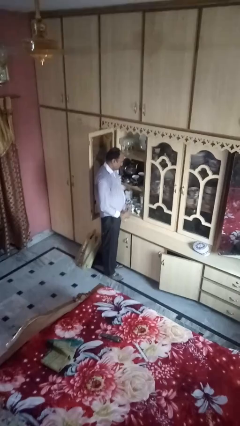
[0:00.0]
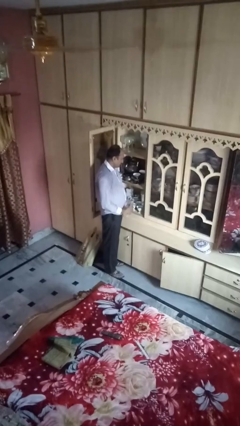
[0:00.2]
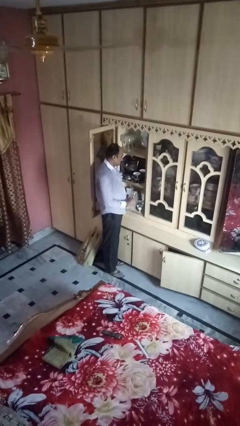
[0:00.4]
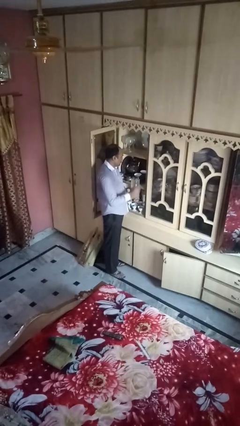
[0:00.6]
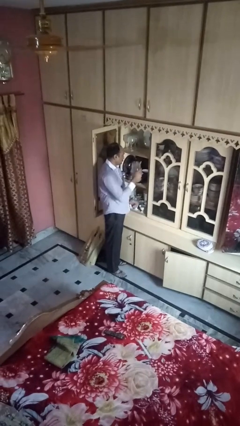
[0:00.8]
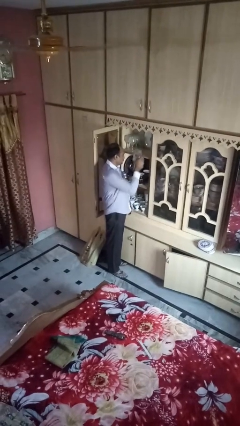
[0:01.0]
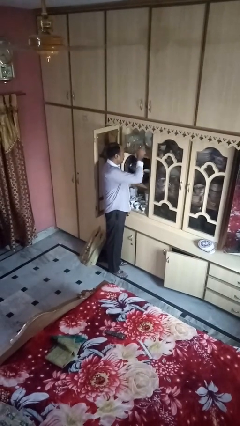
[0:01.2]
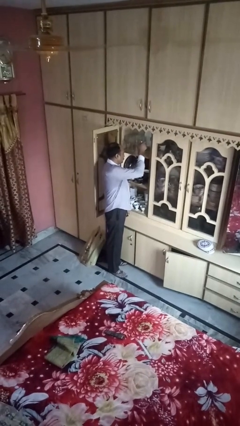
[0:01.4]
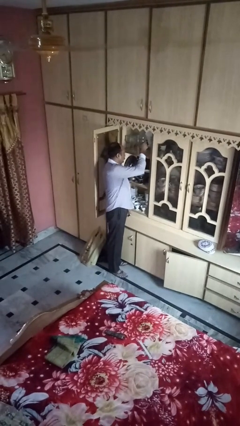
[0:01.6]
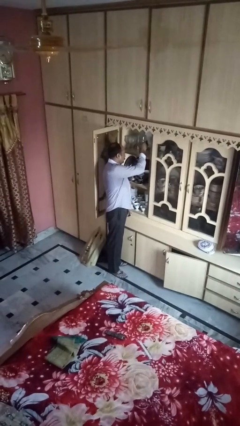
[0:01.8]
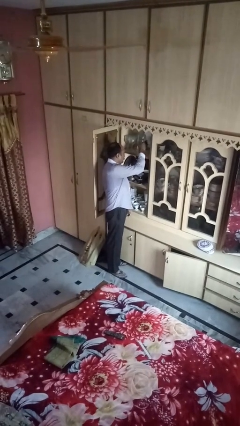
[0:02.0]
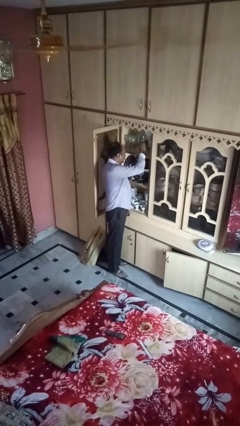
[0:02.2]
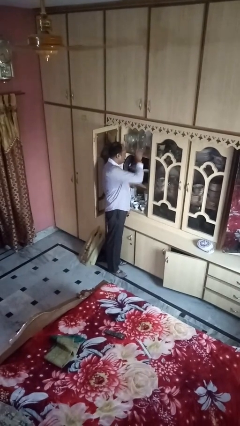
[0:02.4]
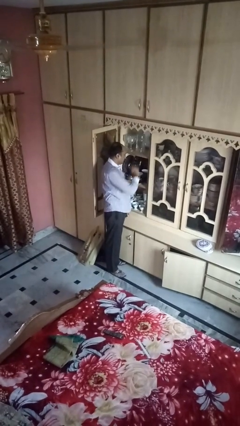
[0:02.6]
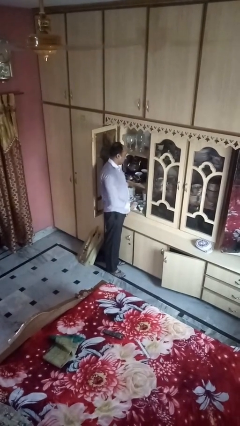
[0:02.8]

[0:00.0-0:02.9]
person puts down object into cabinet

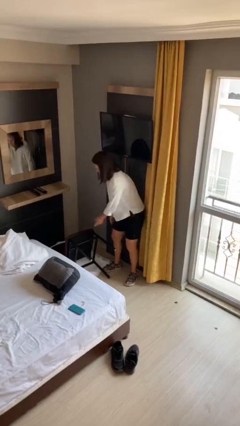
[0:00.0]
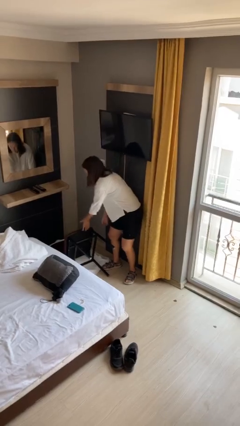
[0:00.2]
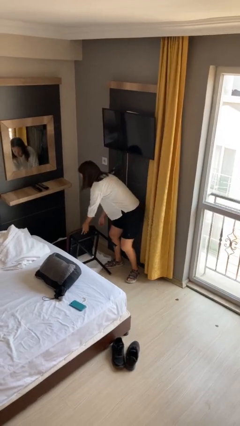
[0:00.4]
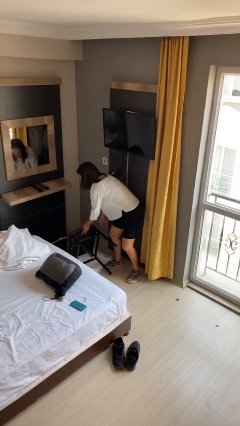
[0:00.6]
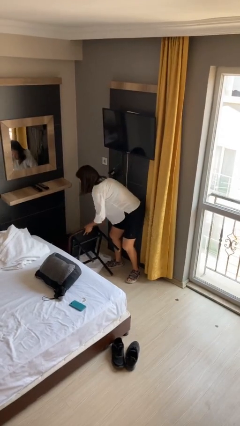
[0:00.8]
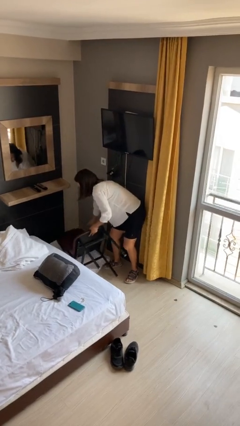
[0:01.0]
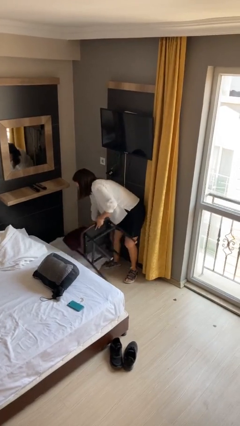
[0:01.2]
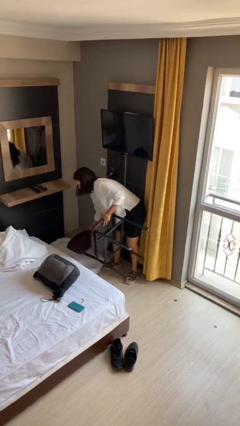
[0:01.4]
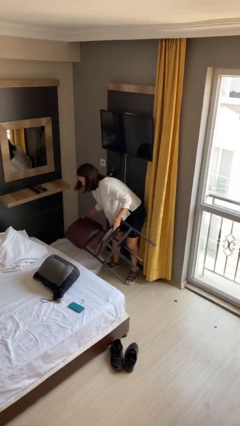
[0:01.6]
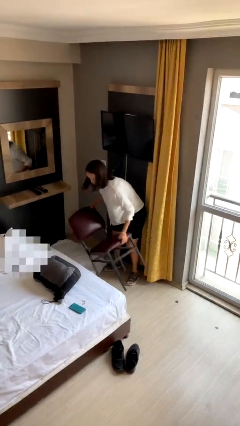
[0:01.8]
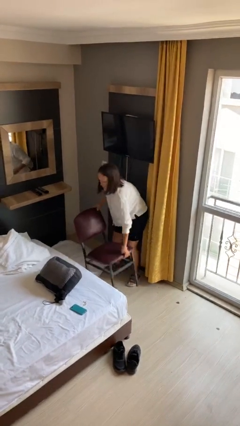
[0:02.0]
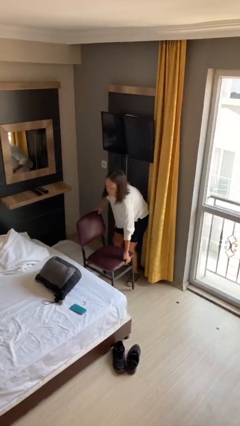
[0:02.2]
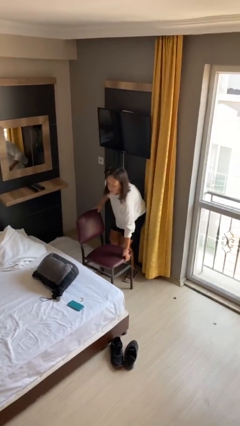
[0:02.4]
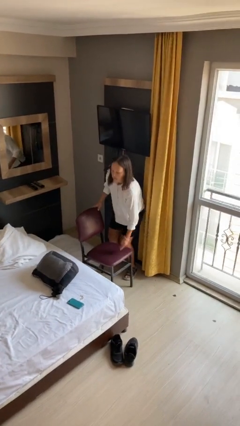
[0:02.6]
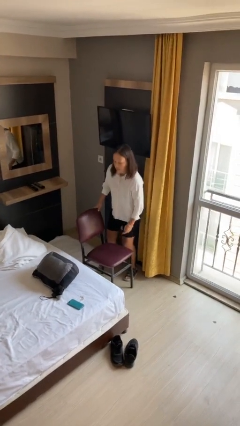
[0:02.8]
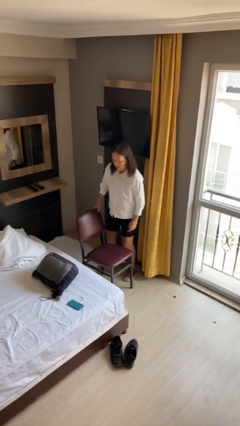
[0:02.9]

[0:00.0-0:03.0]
person sets upright furniture

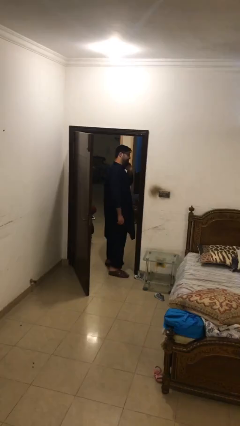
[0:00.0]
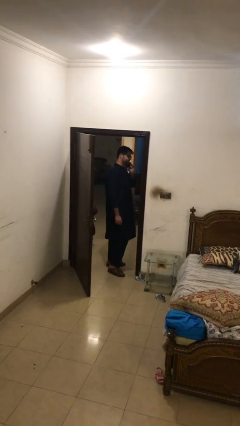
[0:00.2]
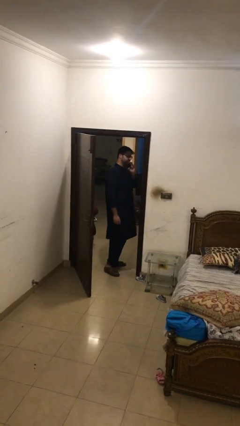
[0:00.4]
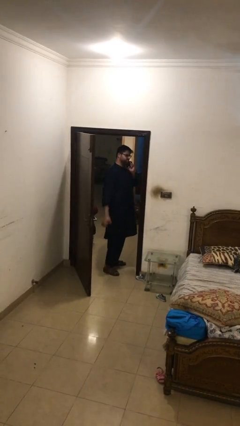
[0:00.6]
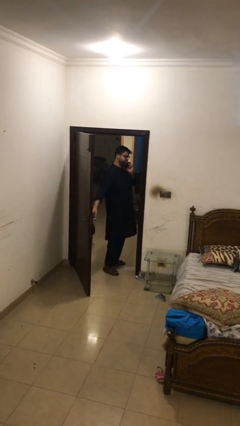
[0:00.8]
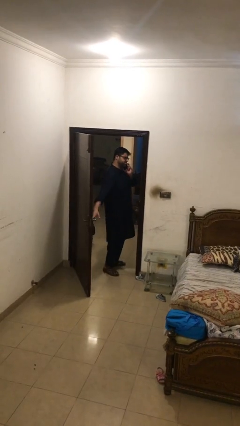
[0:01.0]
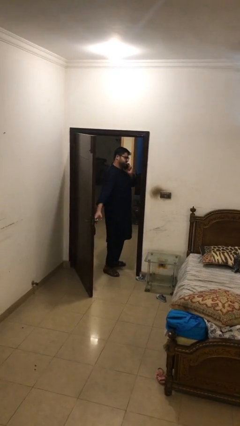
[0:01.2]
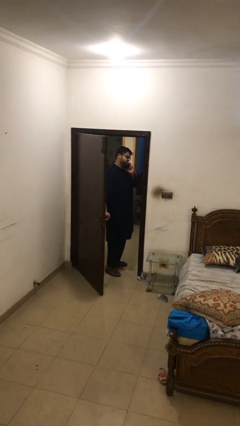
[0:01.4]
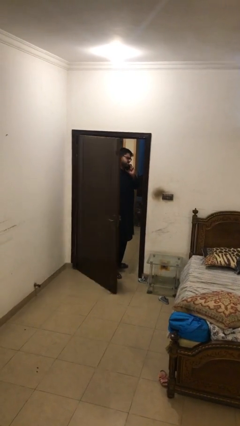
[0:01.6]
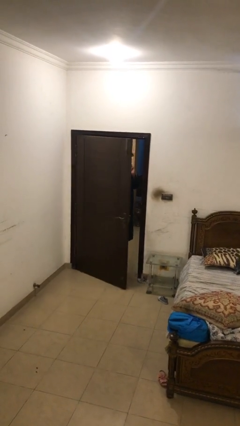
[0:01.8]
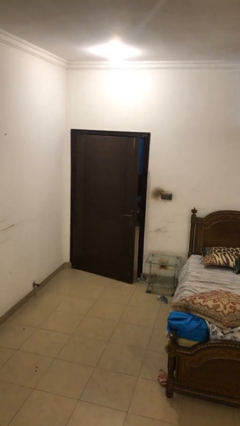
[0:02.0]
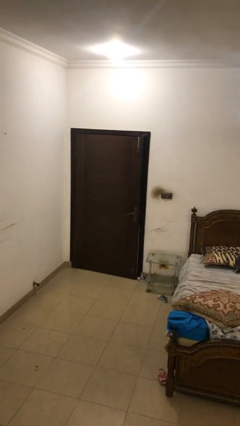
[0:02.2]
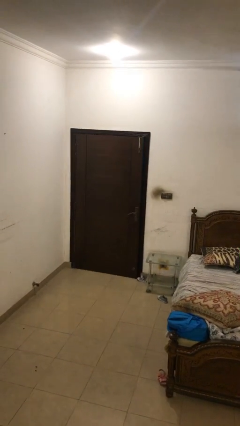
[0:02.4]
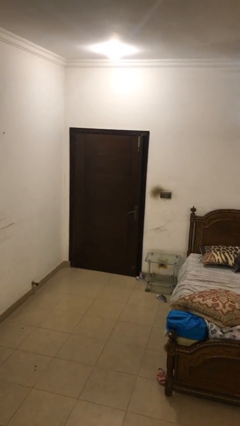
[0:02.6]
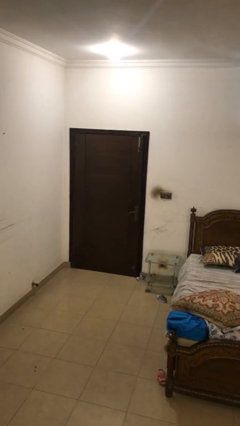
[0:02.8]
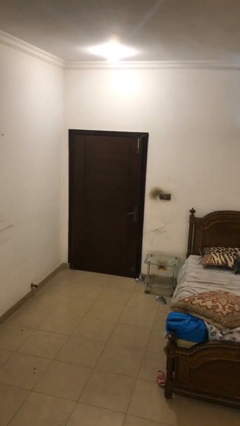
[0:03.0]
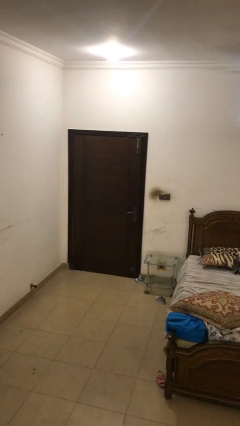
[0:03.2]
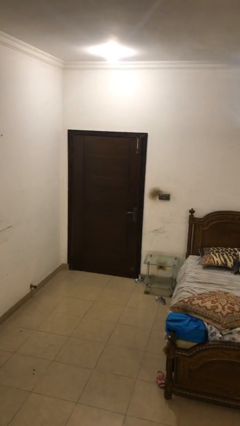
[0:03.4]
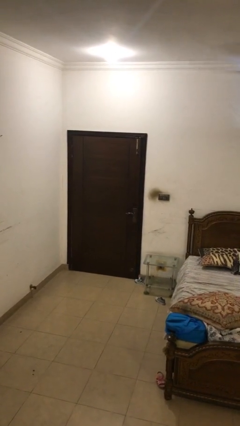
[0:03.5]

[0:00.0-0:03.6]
person closes facility door

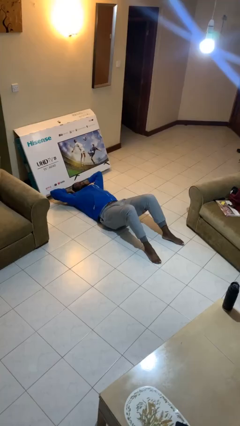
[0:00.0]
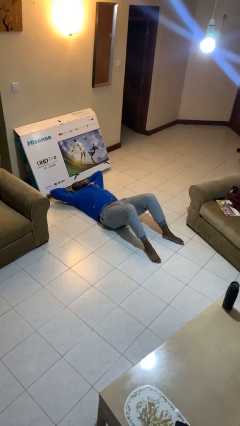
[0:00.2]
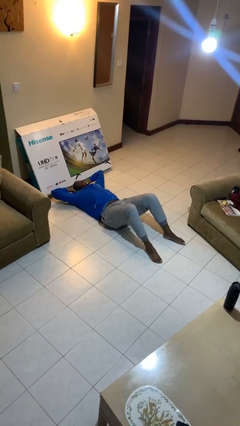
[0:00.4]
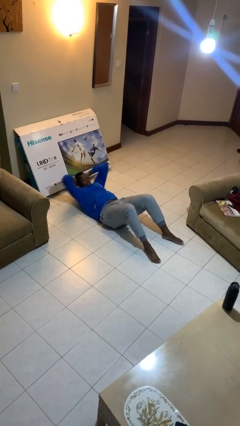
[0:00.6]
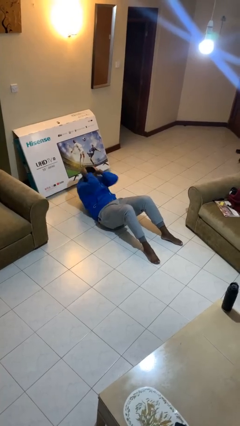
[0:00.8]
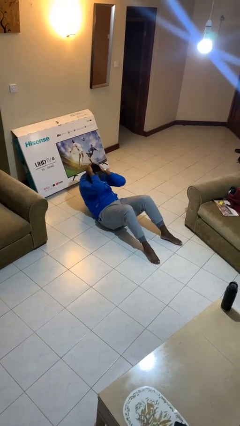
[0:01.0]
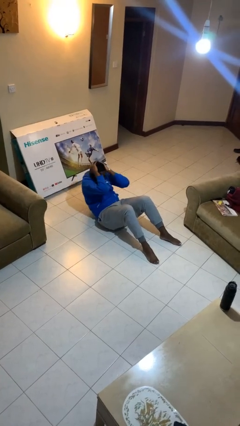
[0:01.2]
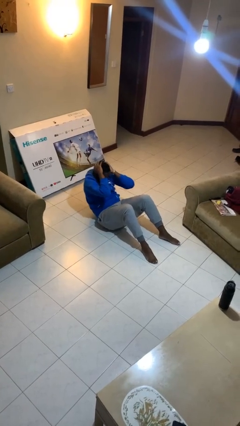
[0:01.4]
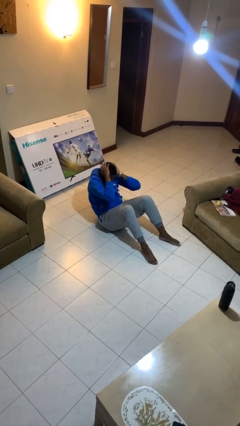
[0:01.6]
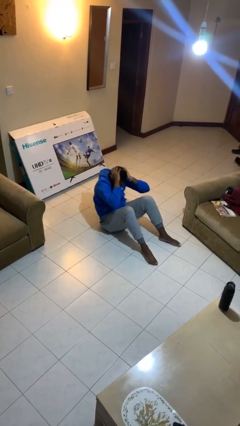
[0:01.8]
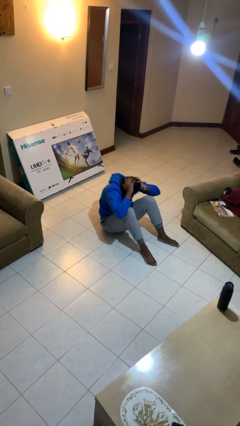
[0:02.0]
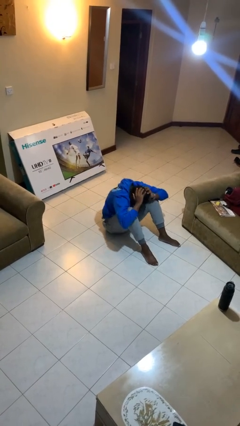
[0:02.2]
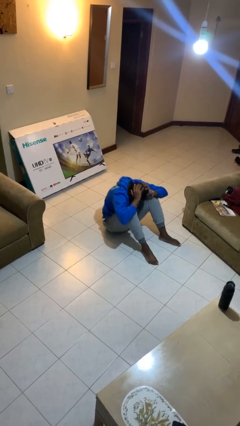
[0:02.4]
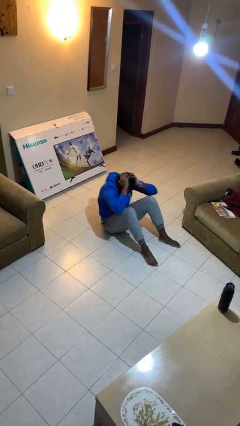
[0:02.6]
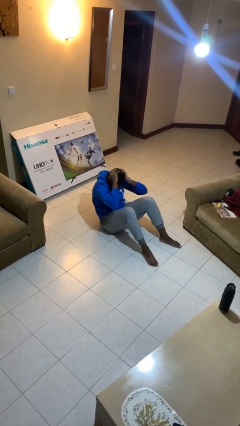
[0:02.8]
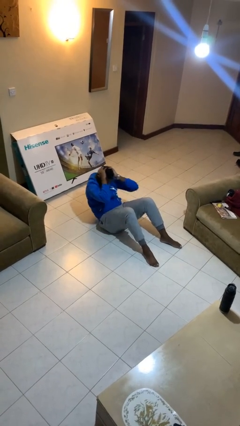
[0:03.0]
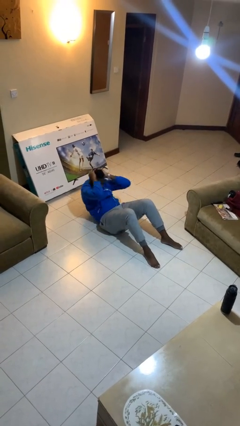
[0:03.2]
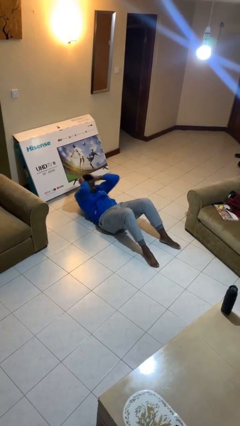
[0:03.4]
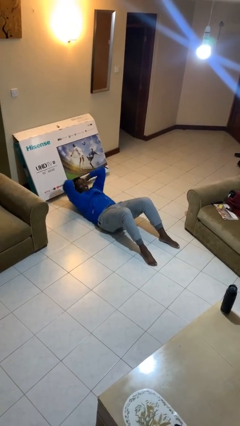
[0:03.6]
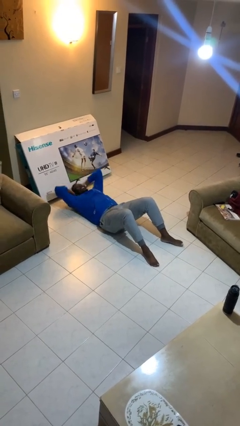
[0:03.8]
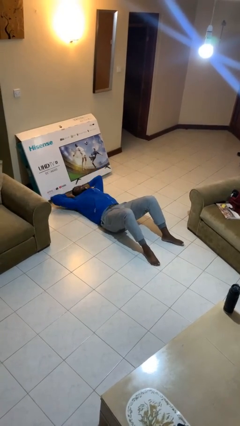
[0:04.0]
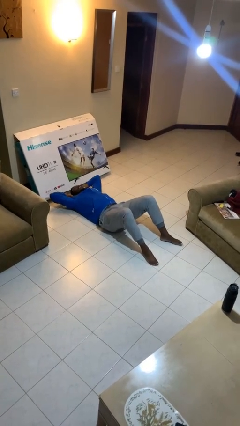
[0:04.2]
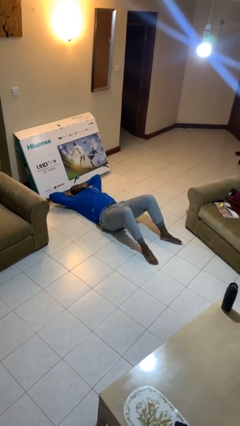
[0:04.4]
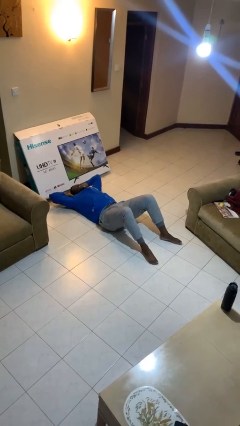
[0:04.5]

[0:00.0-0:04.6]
person exercises with situp

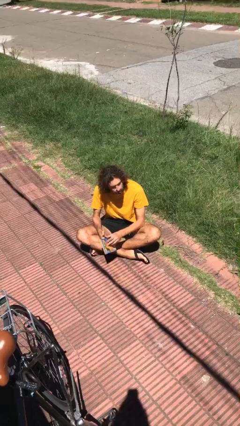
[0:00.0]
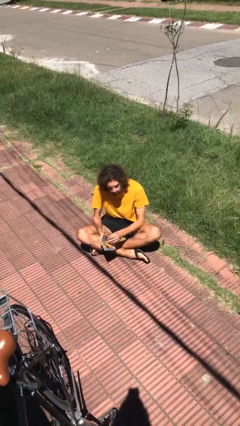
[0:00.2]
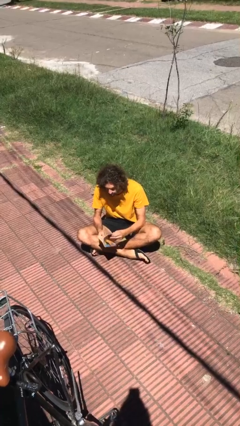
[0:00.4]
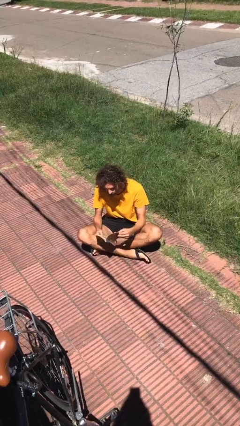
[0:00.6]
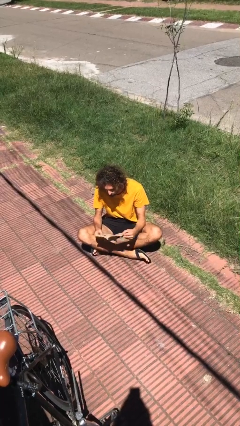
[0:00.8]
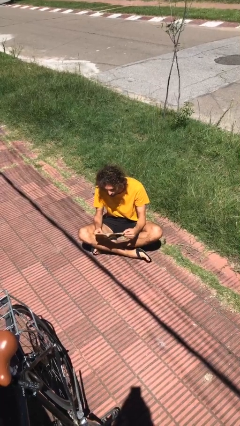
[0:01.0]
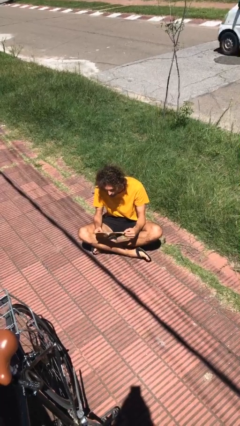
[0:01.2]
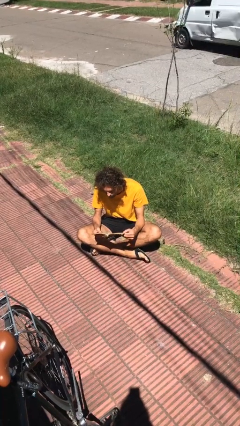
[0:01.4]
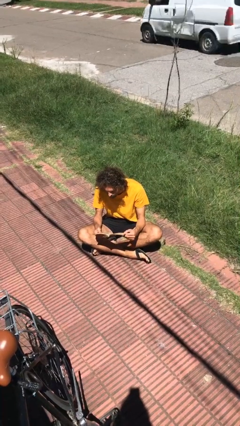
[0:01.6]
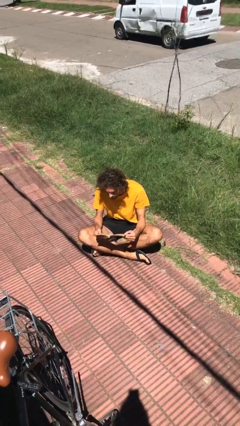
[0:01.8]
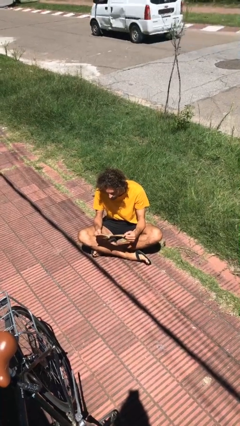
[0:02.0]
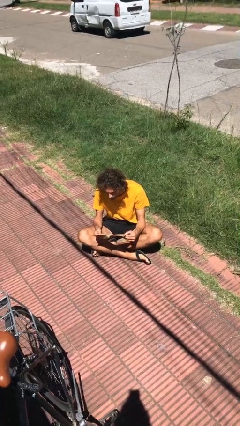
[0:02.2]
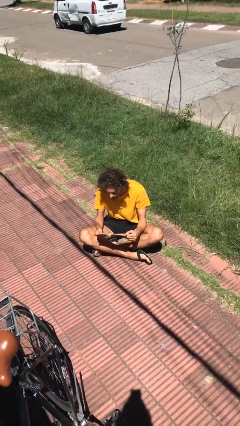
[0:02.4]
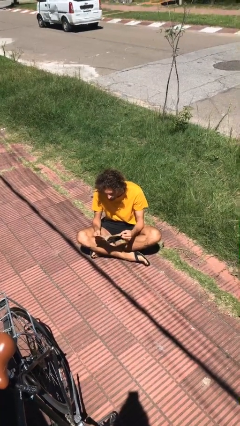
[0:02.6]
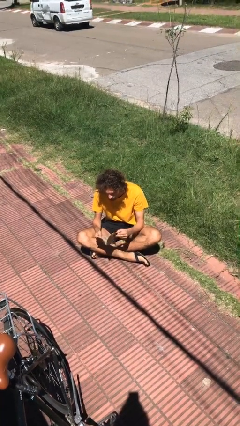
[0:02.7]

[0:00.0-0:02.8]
person reads document

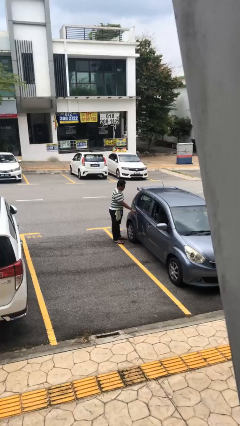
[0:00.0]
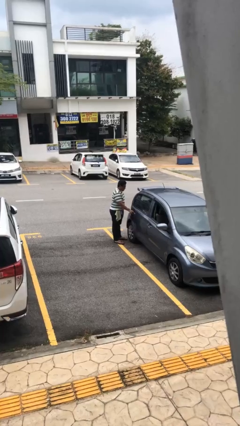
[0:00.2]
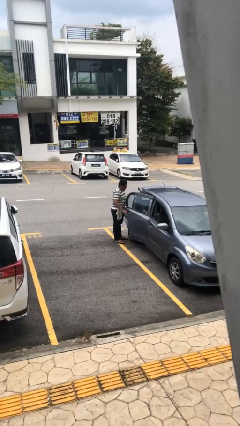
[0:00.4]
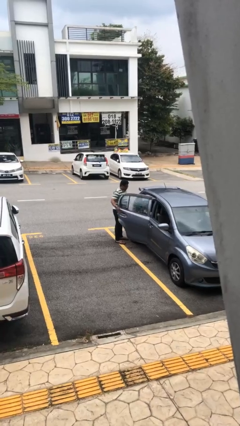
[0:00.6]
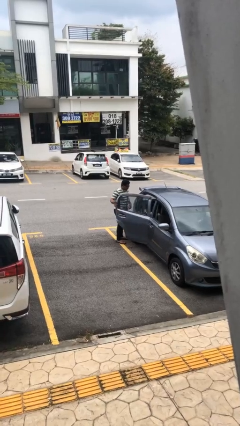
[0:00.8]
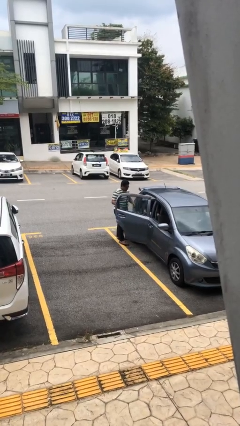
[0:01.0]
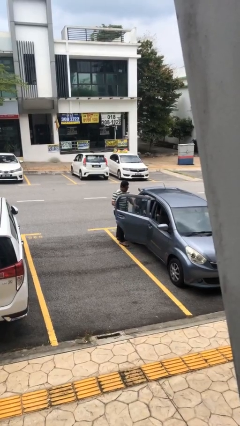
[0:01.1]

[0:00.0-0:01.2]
person opens car door
